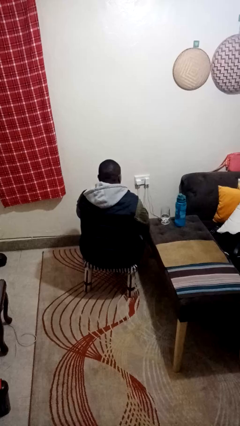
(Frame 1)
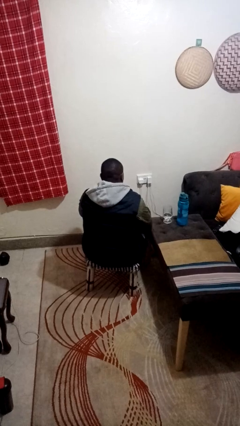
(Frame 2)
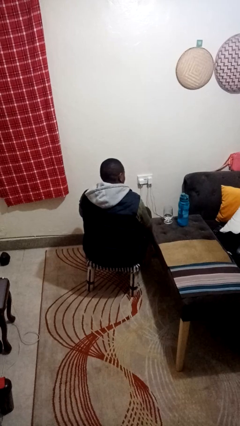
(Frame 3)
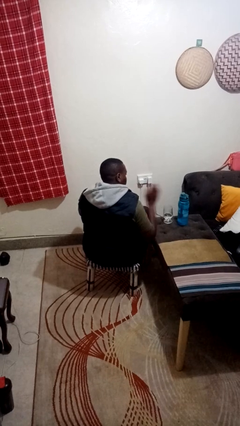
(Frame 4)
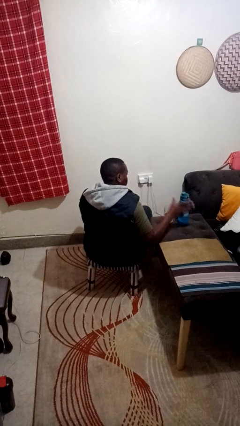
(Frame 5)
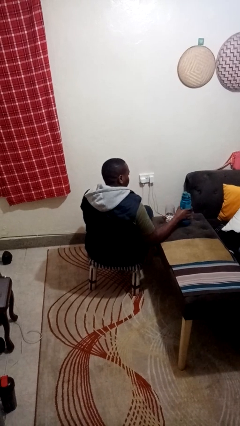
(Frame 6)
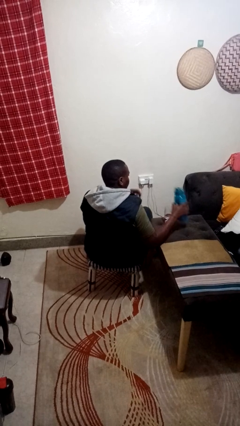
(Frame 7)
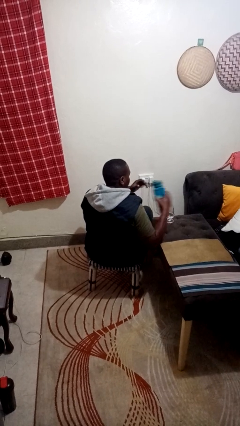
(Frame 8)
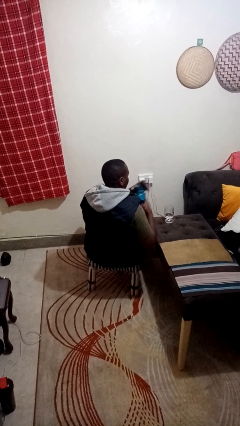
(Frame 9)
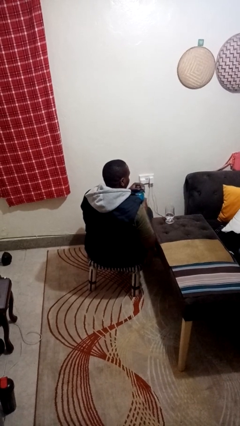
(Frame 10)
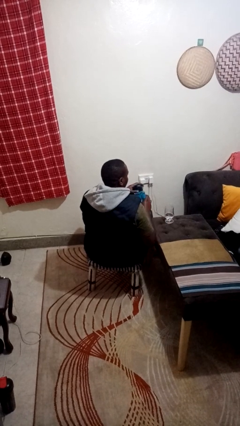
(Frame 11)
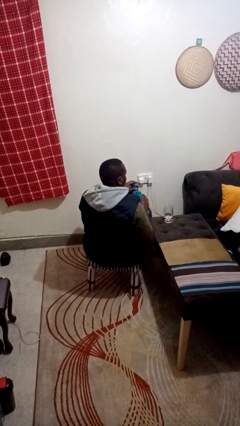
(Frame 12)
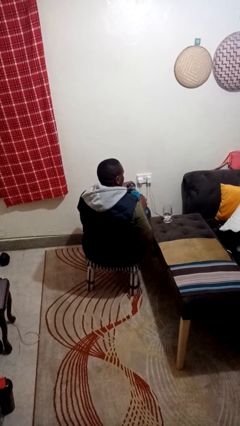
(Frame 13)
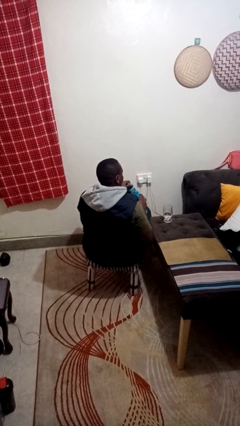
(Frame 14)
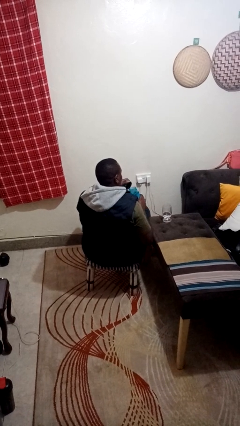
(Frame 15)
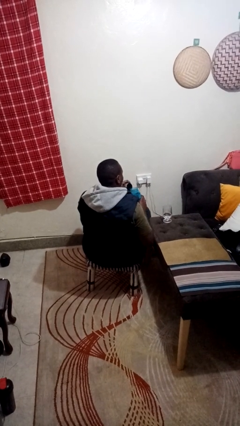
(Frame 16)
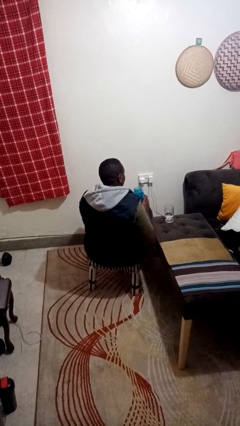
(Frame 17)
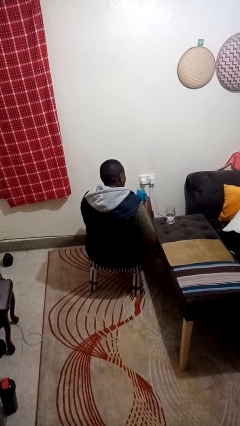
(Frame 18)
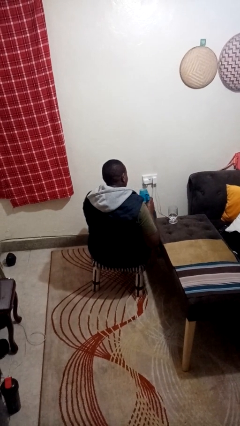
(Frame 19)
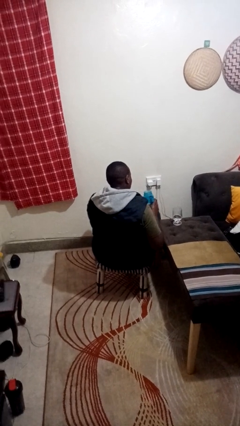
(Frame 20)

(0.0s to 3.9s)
person unscrews lid from bottle

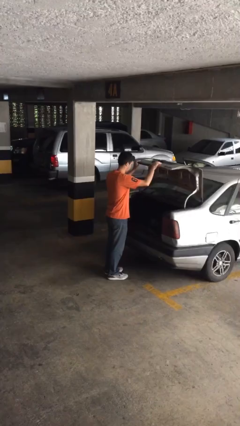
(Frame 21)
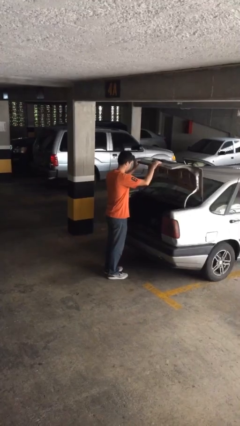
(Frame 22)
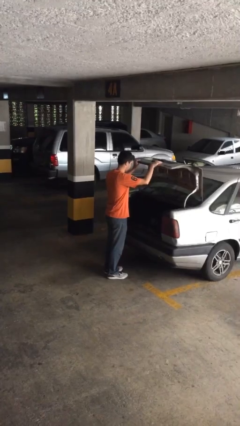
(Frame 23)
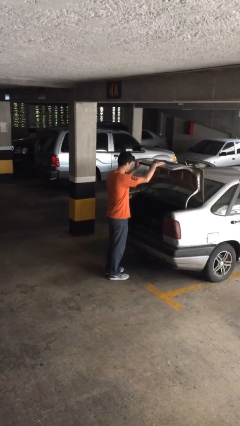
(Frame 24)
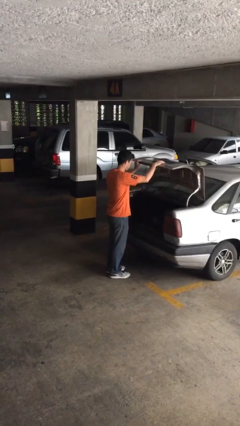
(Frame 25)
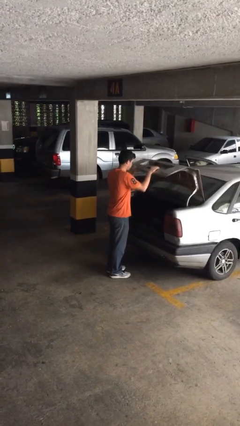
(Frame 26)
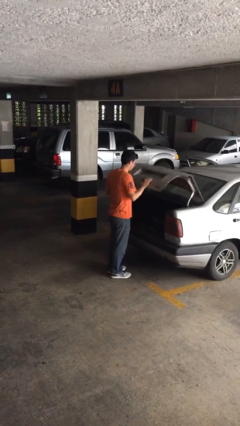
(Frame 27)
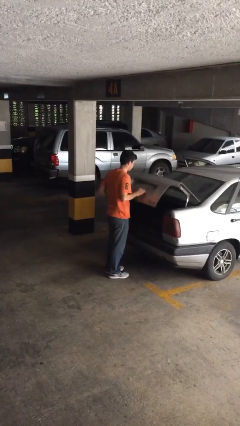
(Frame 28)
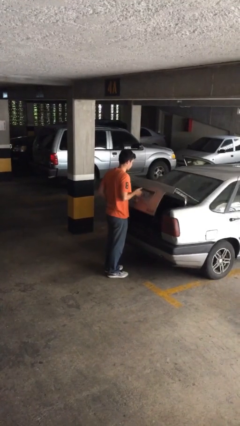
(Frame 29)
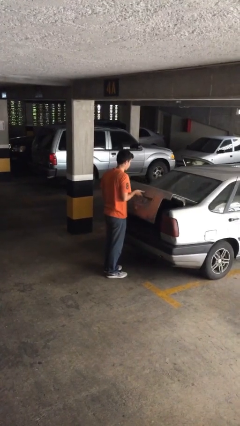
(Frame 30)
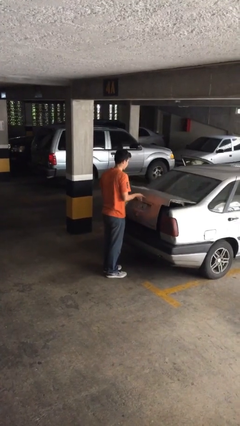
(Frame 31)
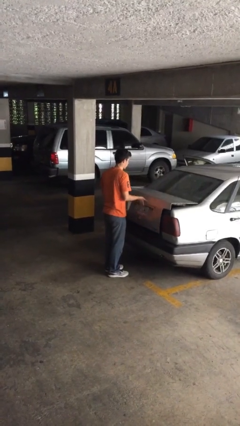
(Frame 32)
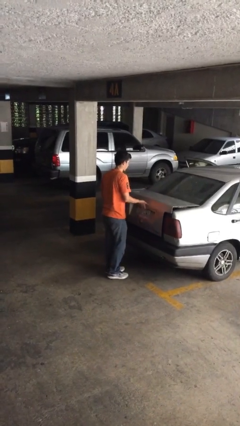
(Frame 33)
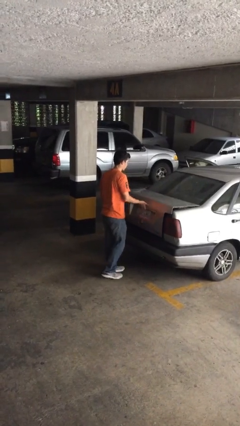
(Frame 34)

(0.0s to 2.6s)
person closes car trunk

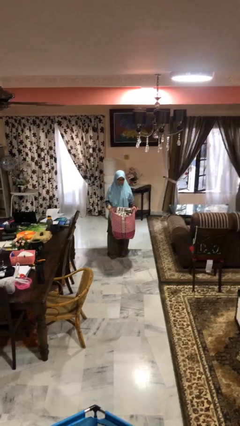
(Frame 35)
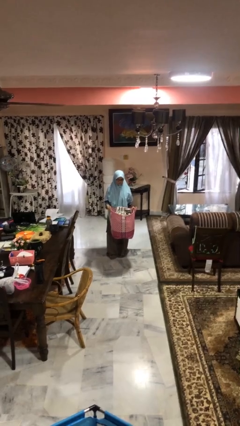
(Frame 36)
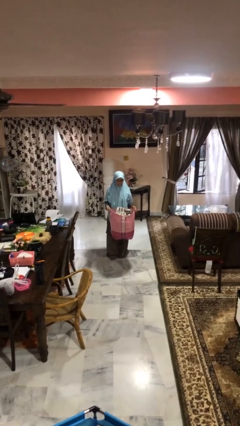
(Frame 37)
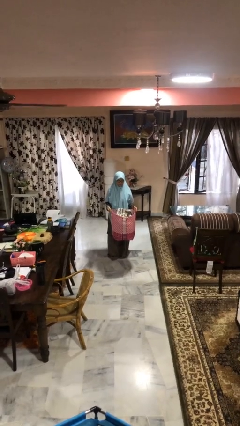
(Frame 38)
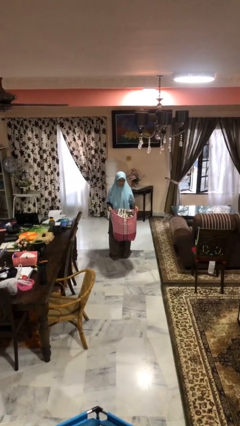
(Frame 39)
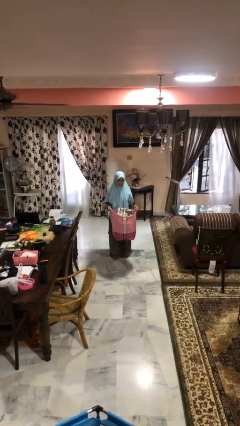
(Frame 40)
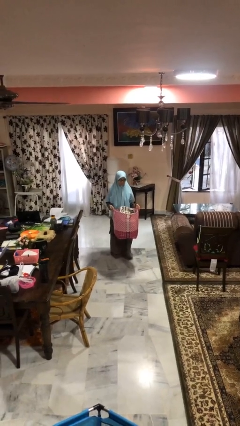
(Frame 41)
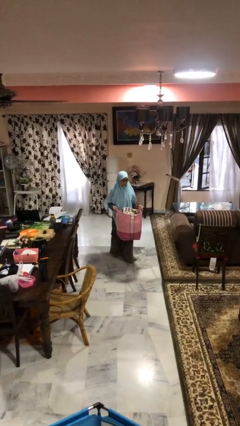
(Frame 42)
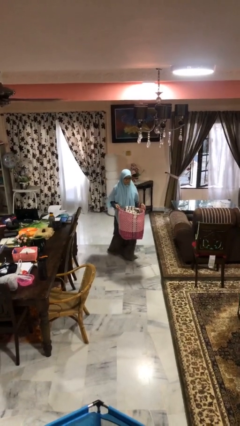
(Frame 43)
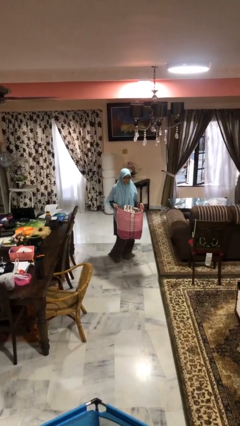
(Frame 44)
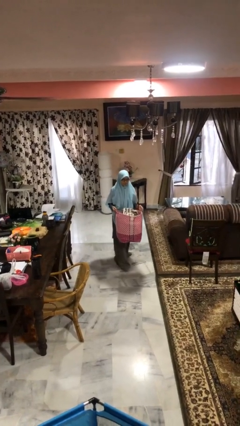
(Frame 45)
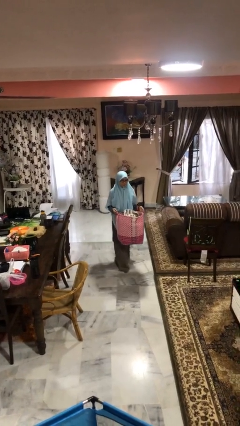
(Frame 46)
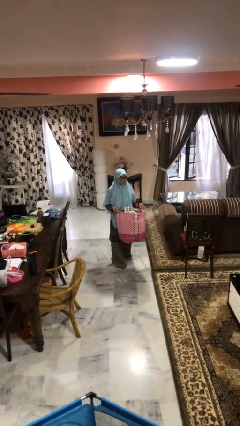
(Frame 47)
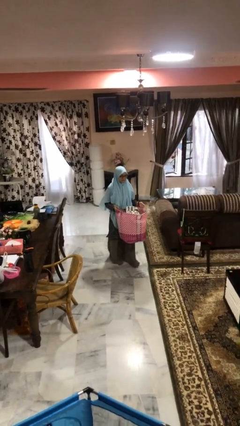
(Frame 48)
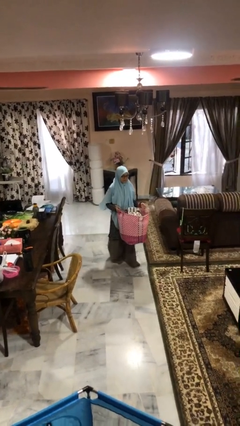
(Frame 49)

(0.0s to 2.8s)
person carries laundry basket

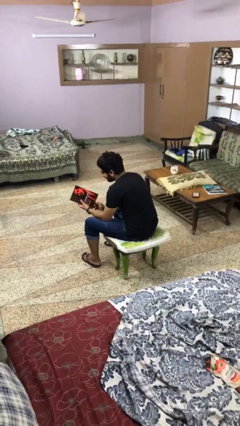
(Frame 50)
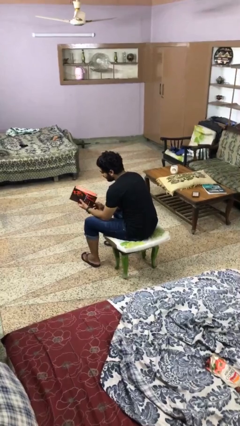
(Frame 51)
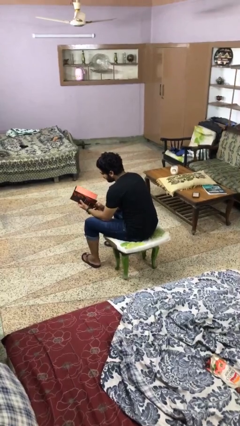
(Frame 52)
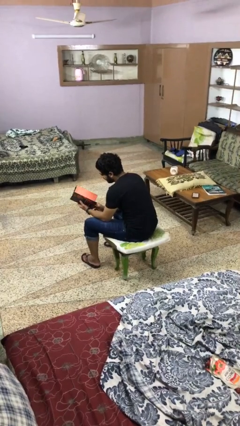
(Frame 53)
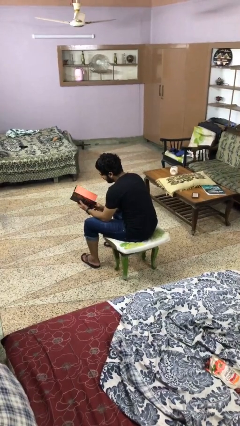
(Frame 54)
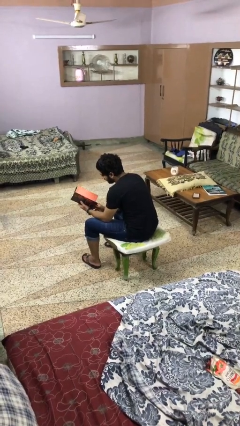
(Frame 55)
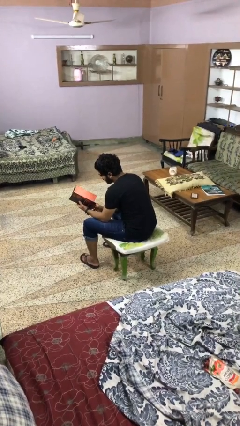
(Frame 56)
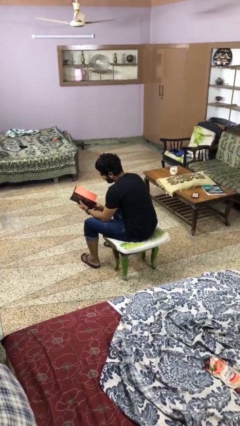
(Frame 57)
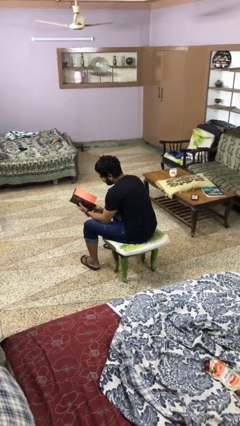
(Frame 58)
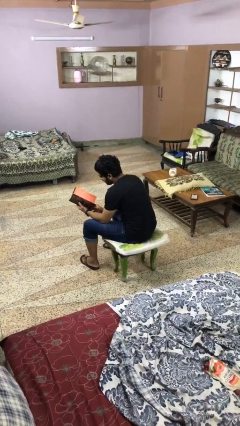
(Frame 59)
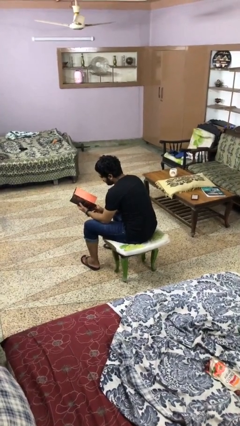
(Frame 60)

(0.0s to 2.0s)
person reads magazine

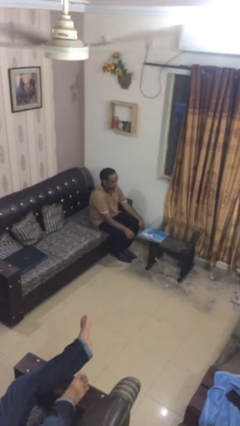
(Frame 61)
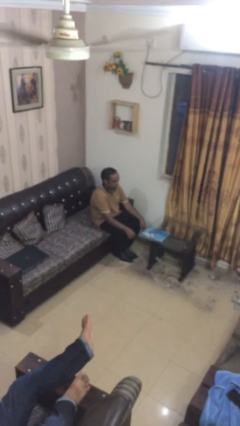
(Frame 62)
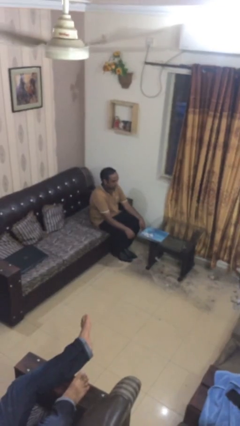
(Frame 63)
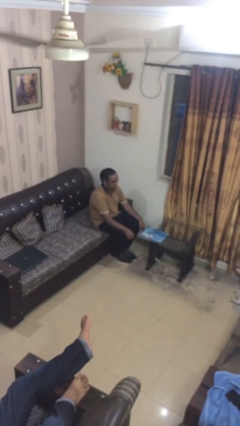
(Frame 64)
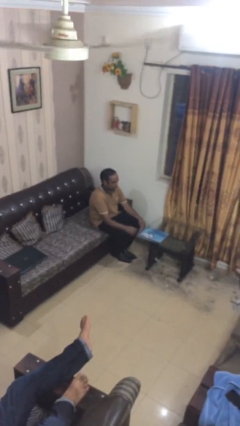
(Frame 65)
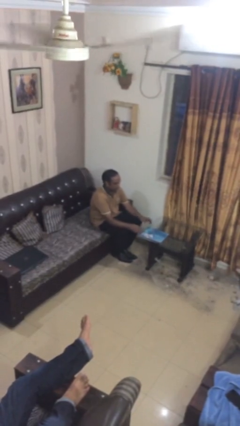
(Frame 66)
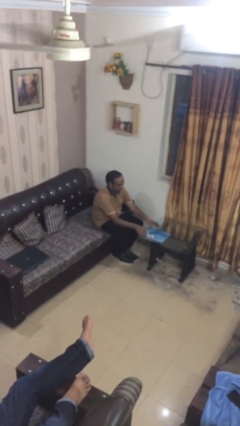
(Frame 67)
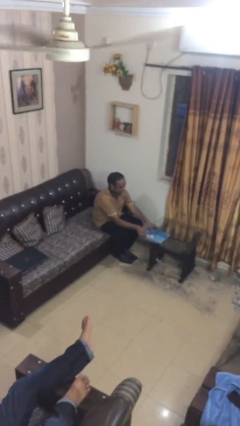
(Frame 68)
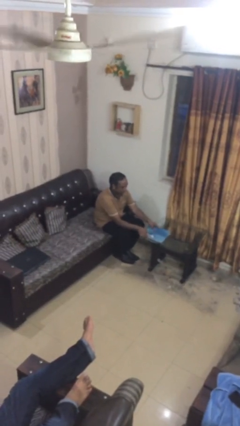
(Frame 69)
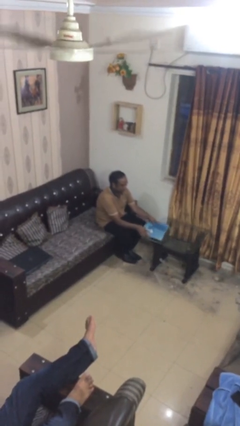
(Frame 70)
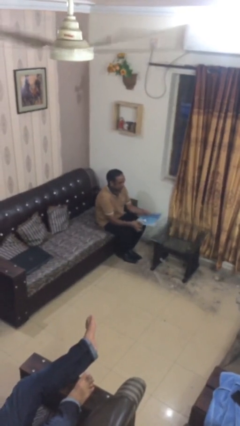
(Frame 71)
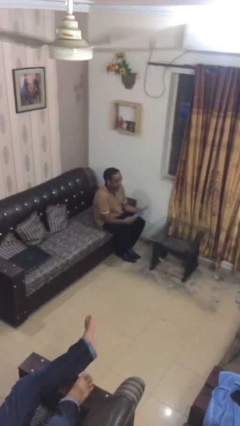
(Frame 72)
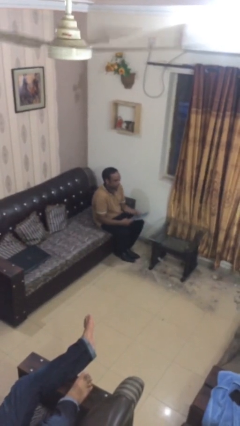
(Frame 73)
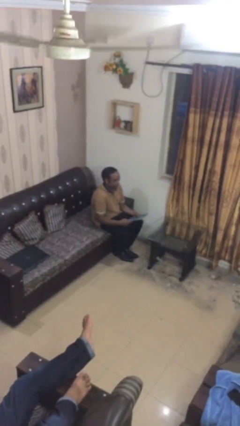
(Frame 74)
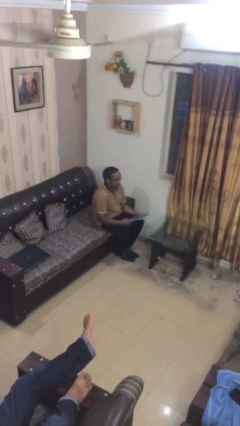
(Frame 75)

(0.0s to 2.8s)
person picks up object from table

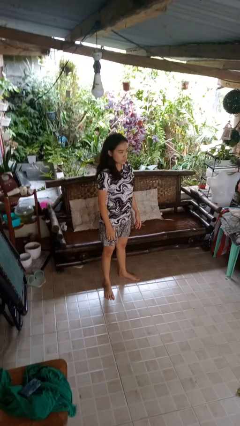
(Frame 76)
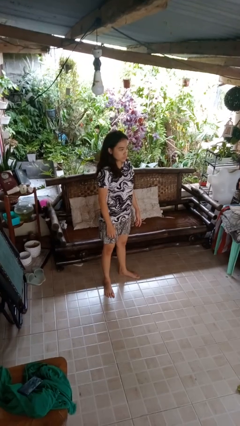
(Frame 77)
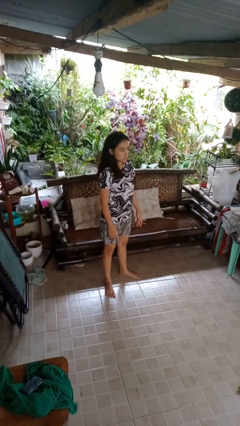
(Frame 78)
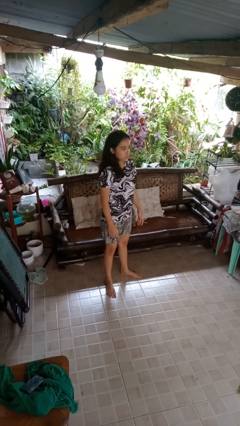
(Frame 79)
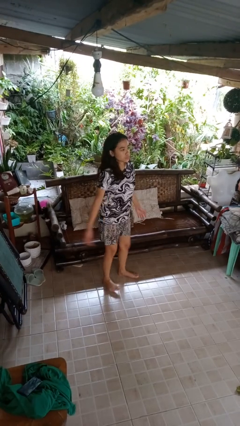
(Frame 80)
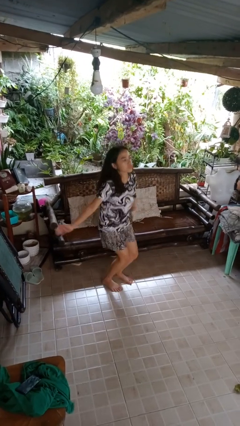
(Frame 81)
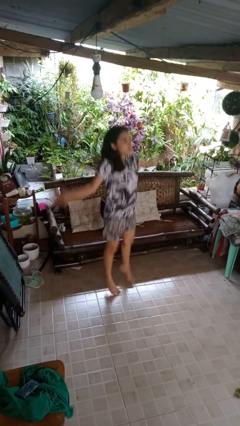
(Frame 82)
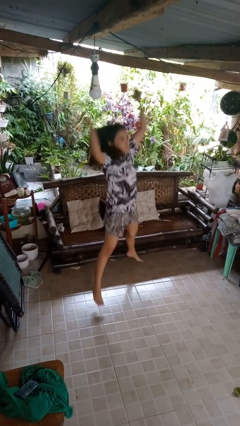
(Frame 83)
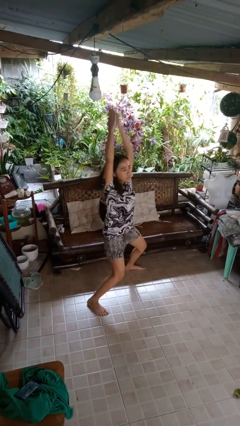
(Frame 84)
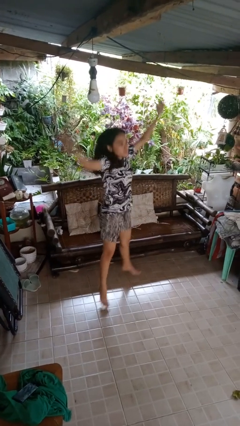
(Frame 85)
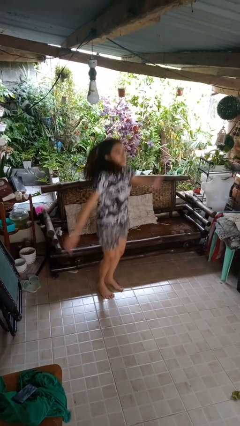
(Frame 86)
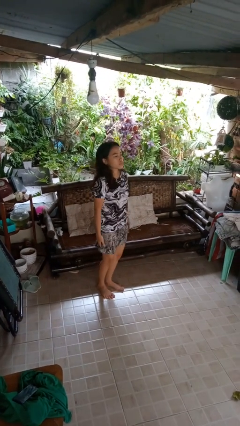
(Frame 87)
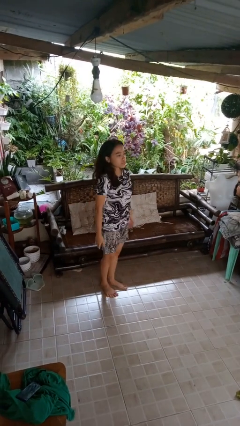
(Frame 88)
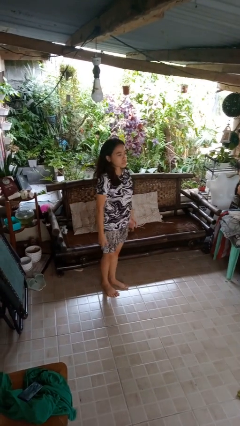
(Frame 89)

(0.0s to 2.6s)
person exercises with jumping jacks
